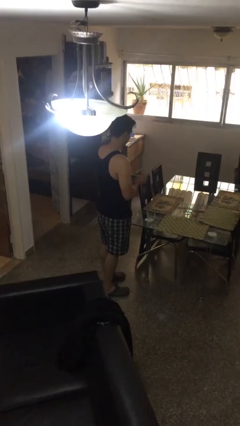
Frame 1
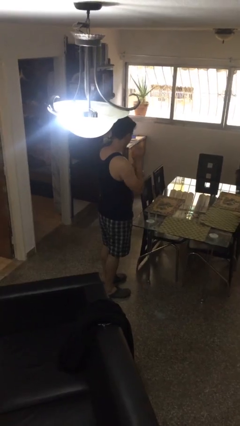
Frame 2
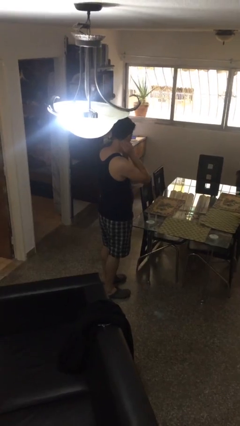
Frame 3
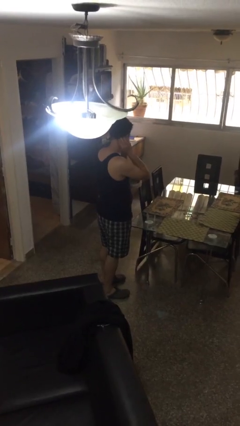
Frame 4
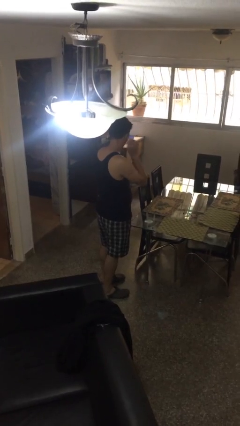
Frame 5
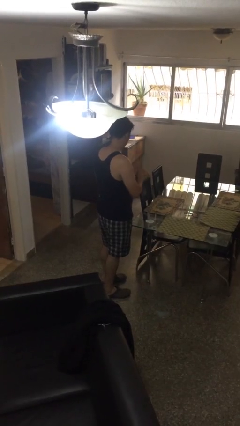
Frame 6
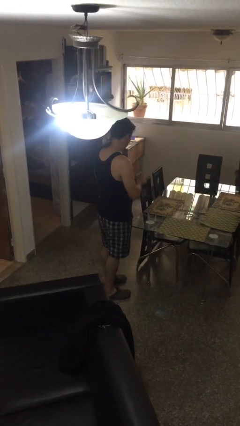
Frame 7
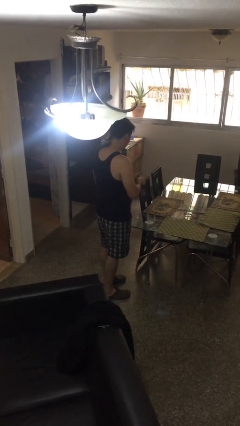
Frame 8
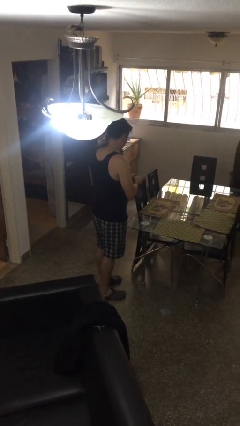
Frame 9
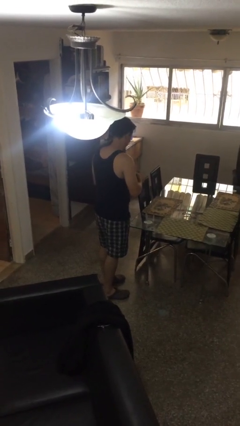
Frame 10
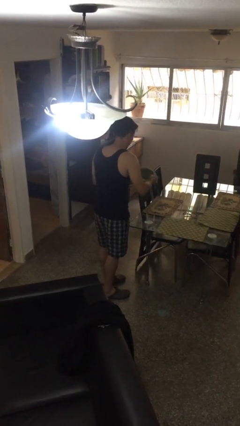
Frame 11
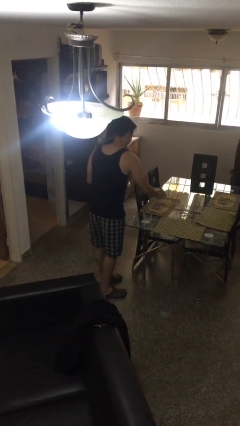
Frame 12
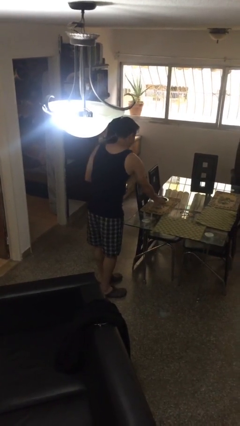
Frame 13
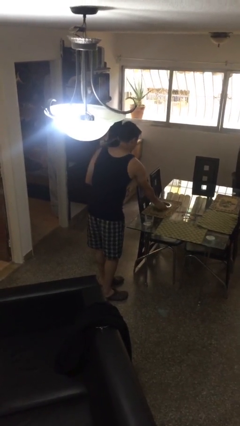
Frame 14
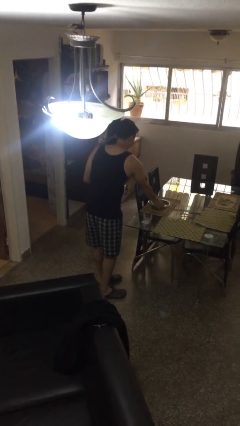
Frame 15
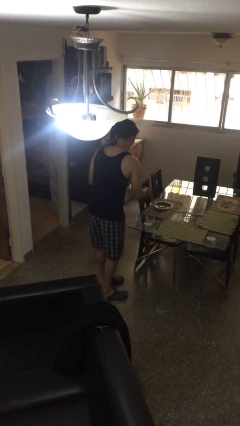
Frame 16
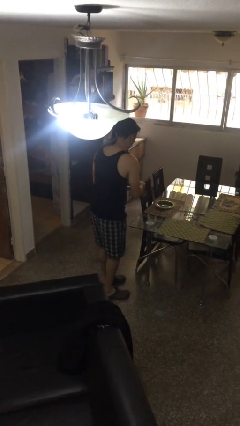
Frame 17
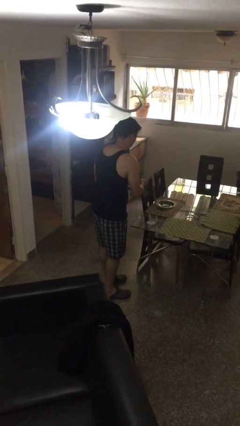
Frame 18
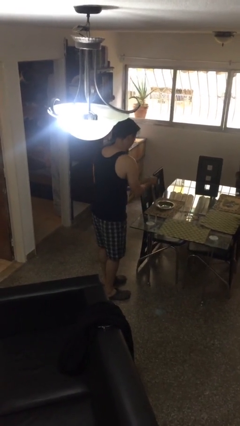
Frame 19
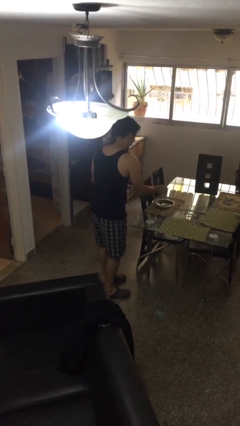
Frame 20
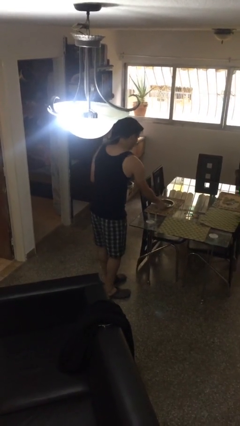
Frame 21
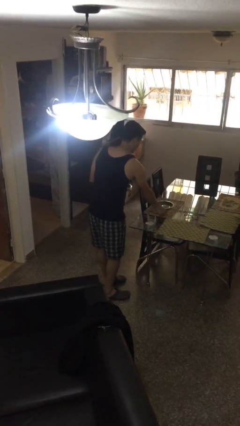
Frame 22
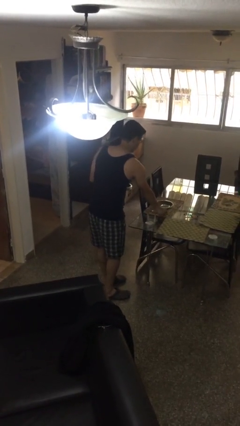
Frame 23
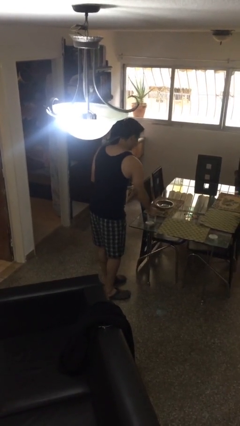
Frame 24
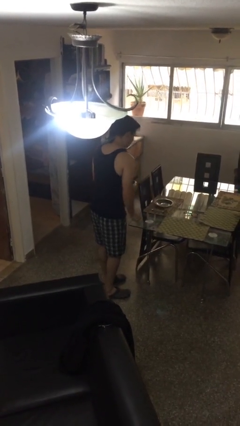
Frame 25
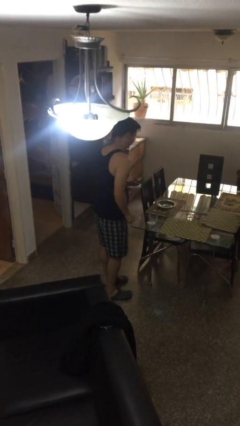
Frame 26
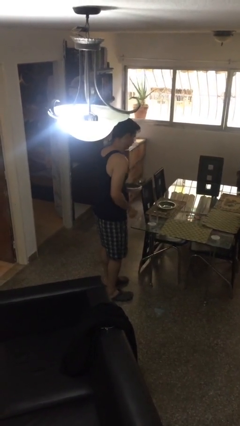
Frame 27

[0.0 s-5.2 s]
person sets table

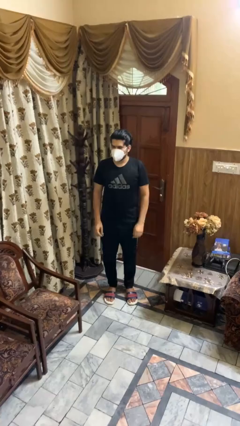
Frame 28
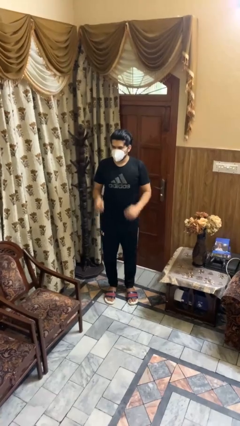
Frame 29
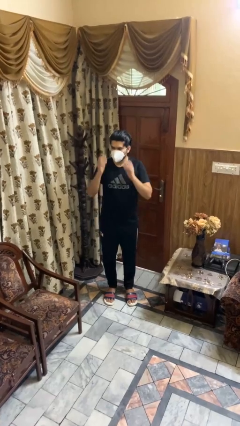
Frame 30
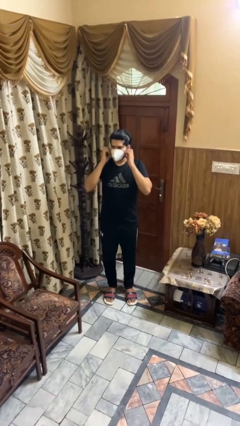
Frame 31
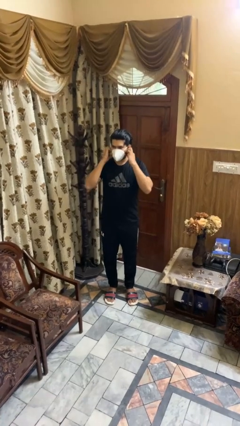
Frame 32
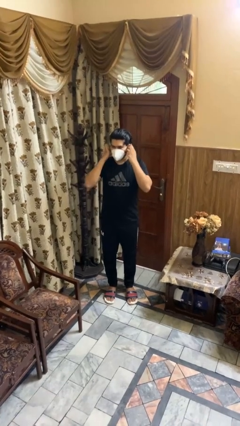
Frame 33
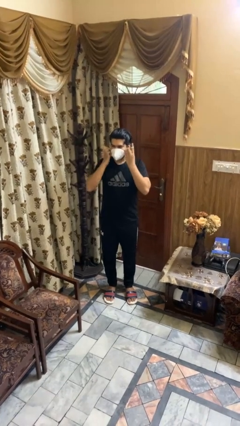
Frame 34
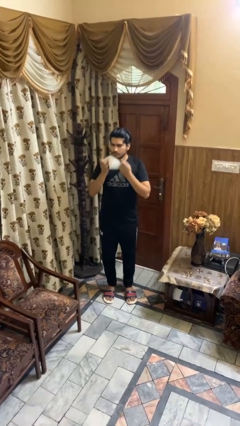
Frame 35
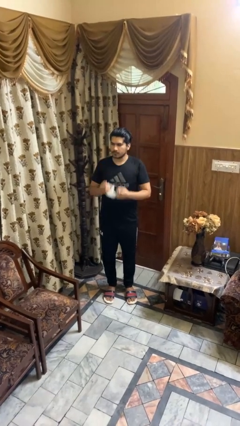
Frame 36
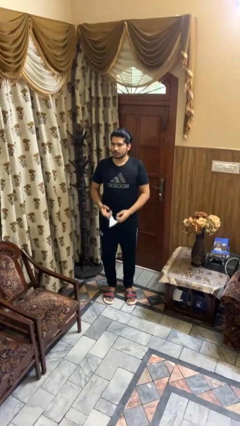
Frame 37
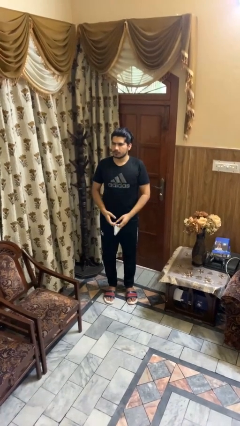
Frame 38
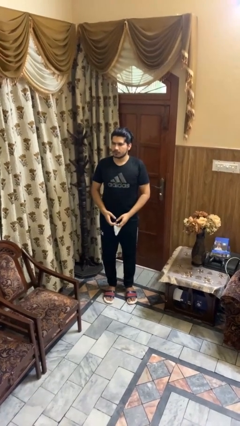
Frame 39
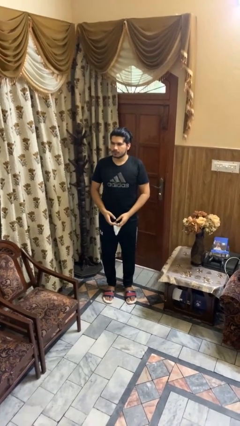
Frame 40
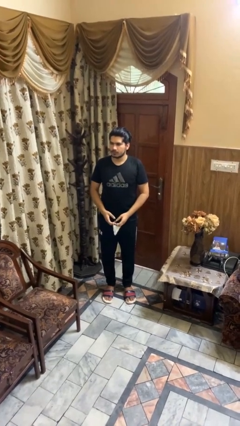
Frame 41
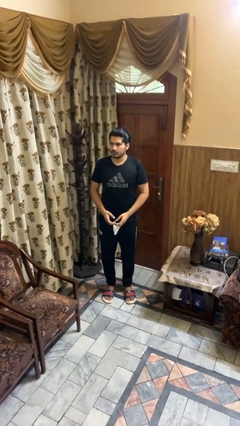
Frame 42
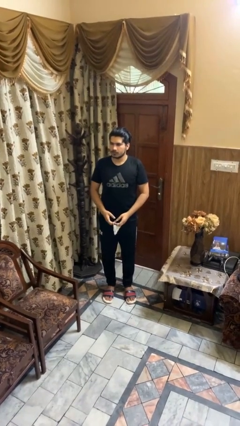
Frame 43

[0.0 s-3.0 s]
person takes off facemask

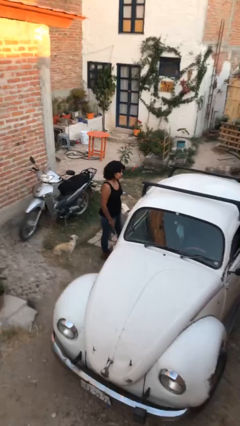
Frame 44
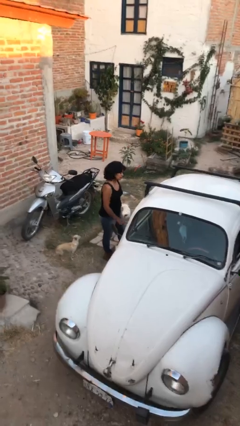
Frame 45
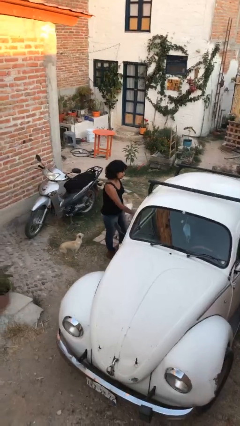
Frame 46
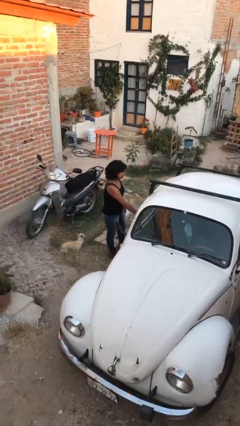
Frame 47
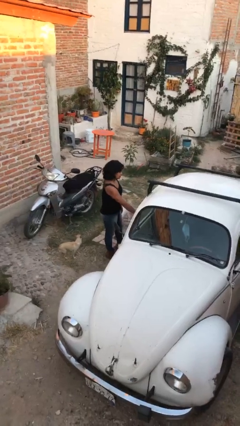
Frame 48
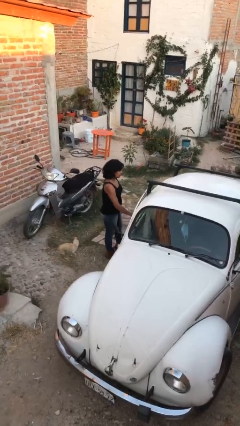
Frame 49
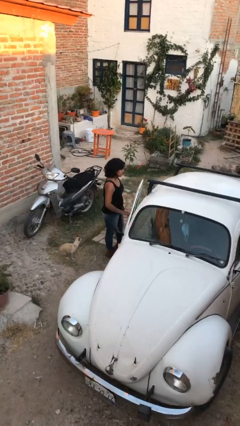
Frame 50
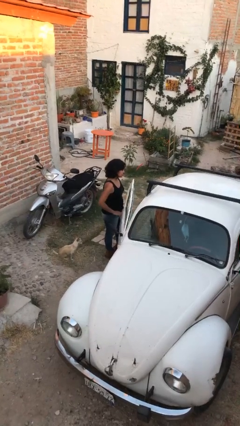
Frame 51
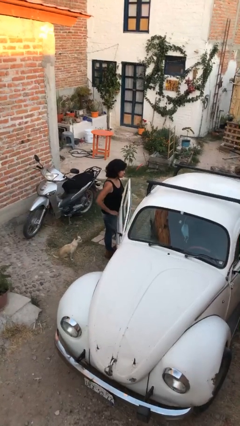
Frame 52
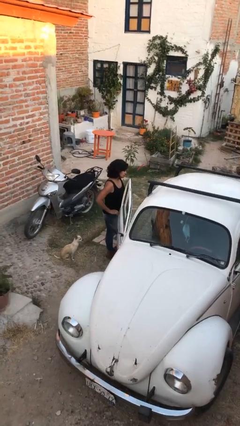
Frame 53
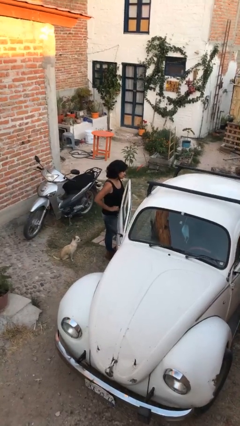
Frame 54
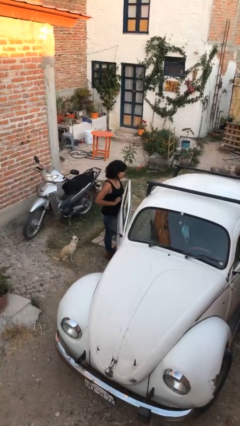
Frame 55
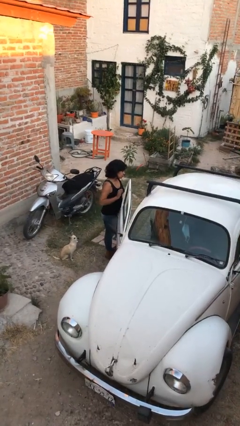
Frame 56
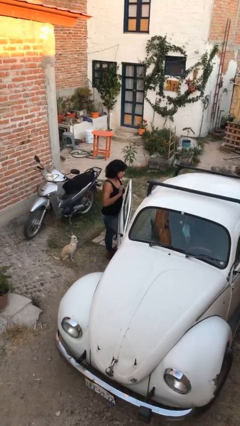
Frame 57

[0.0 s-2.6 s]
person opens car door

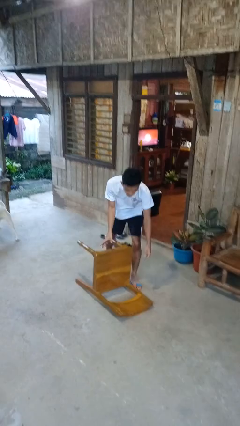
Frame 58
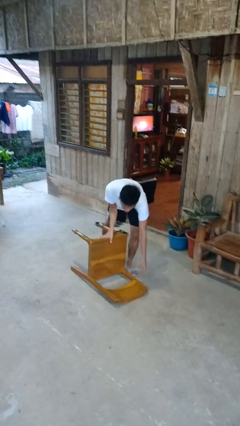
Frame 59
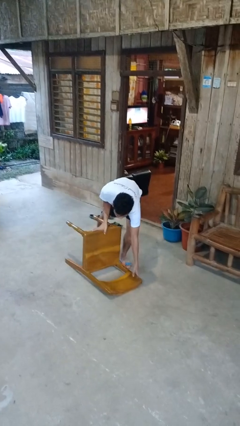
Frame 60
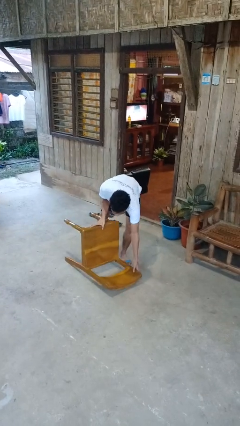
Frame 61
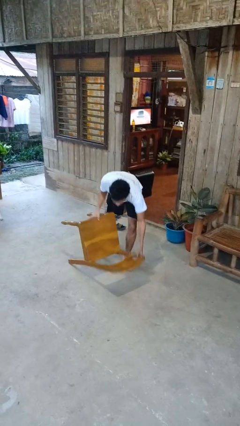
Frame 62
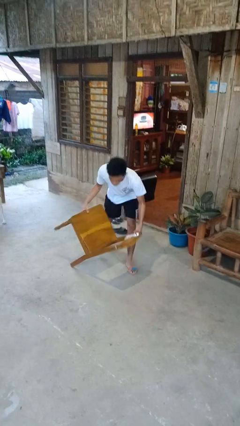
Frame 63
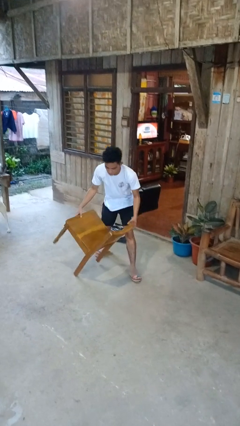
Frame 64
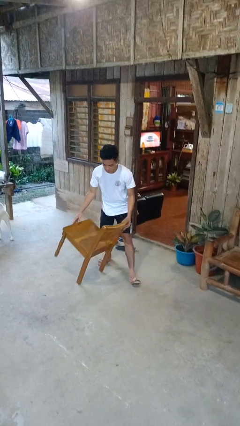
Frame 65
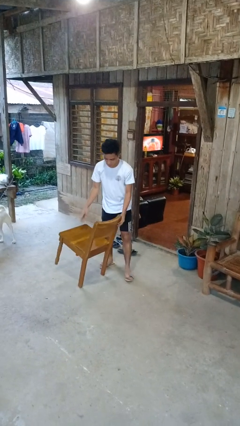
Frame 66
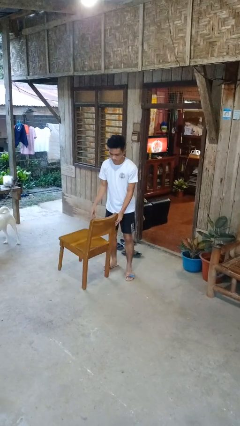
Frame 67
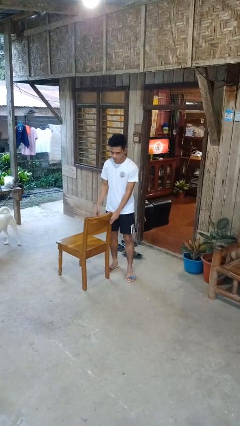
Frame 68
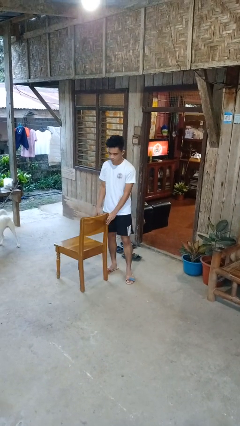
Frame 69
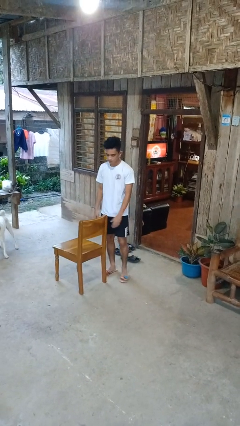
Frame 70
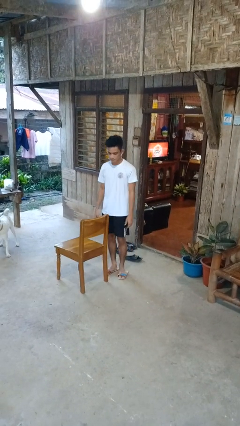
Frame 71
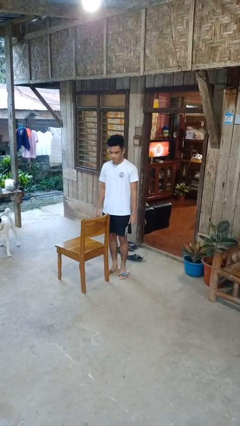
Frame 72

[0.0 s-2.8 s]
person sets upright glass

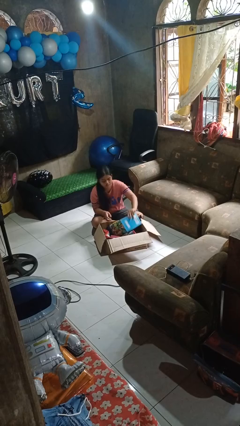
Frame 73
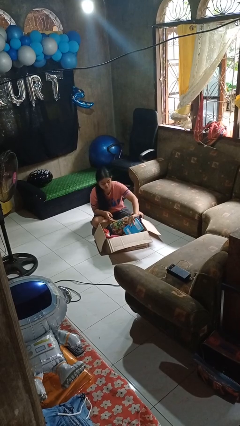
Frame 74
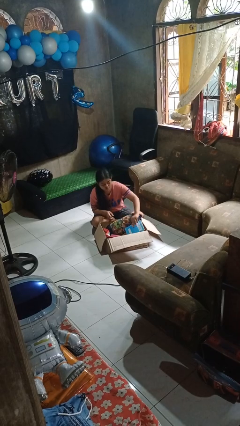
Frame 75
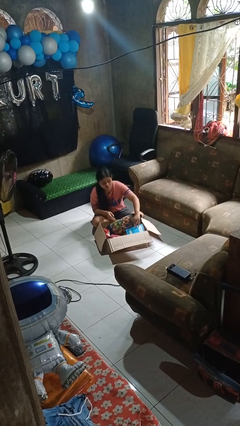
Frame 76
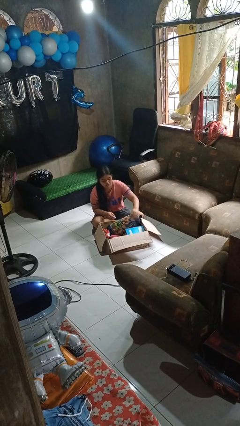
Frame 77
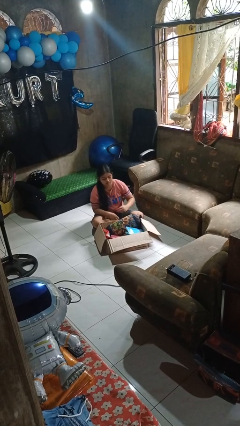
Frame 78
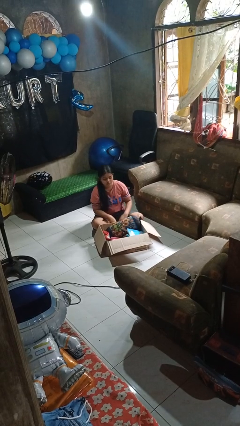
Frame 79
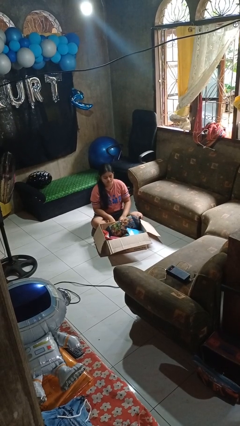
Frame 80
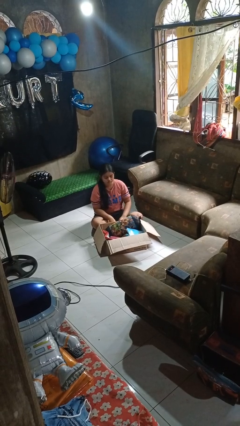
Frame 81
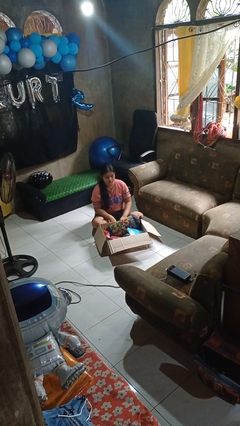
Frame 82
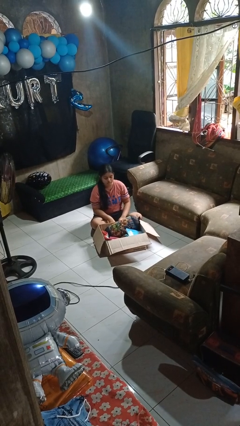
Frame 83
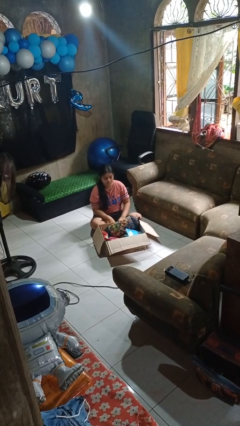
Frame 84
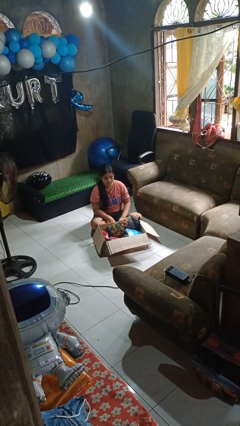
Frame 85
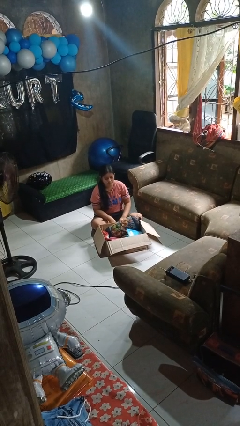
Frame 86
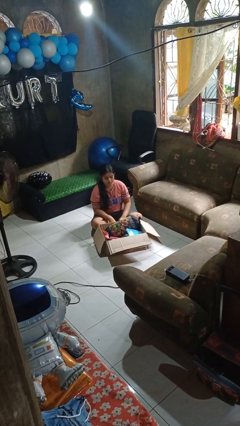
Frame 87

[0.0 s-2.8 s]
person puts object into box

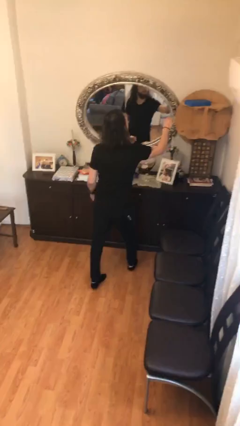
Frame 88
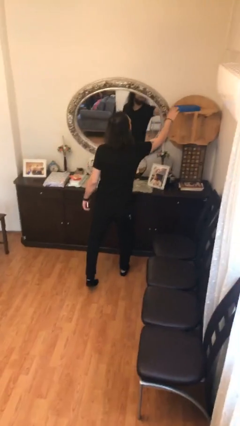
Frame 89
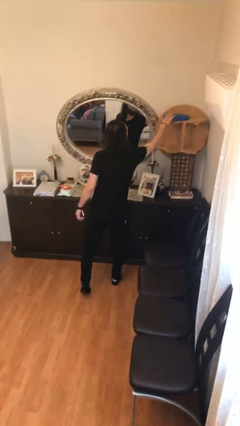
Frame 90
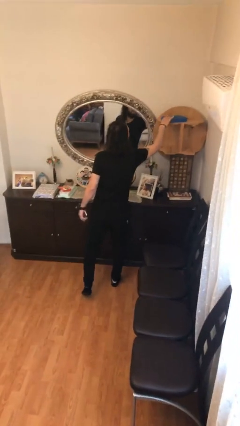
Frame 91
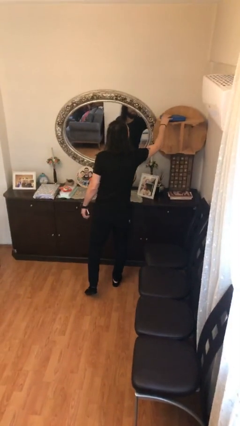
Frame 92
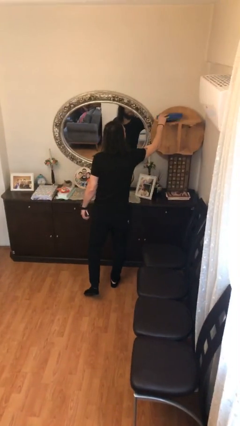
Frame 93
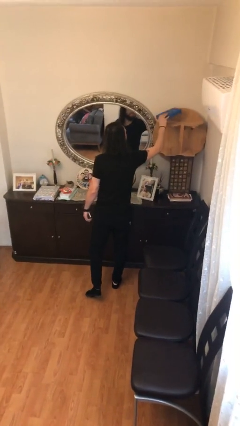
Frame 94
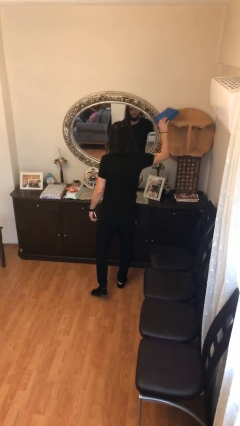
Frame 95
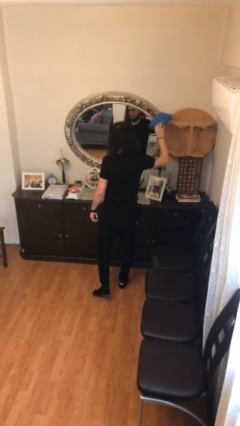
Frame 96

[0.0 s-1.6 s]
person picks up object from shelf
